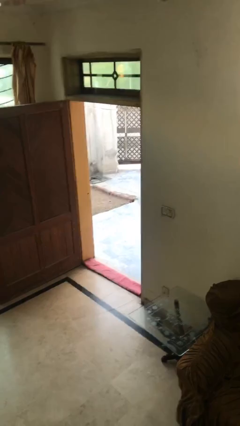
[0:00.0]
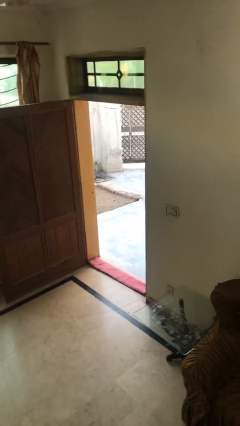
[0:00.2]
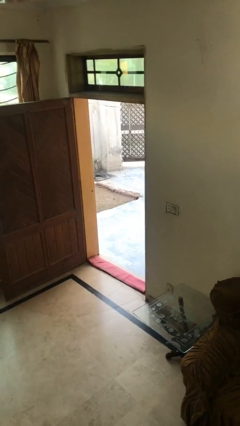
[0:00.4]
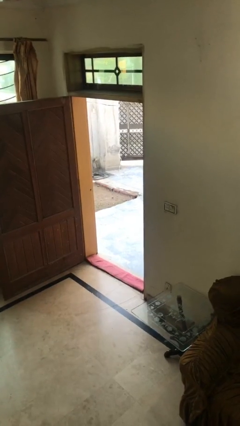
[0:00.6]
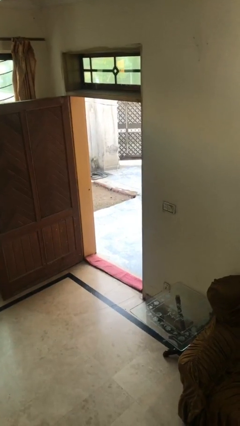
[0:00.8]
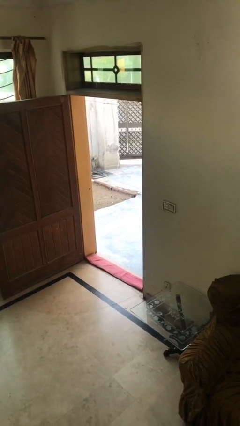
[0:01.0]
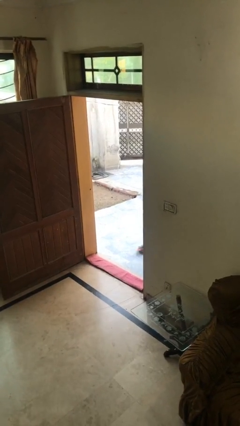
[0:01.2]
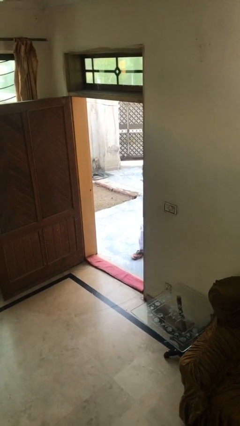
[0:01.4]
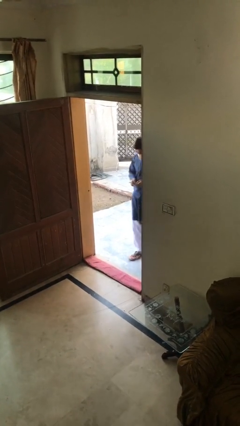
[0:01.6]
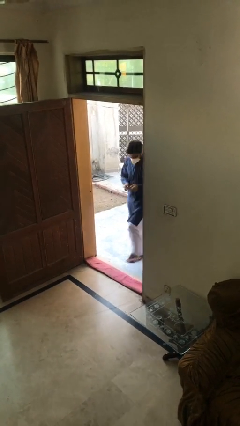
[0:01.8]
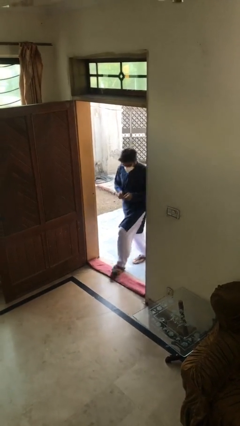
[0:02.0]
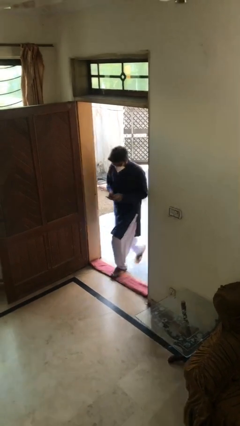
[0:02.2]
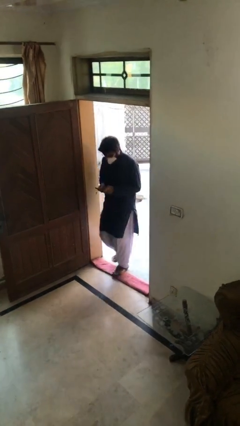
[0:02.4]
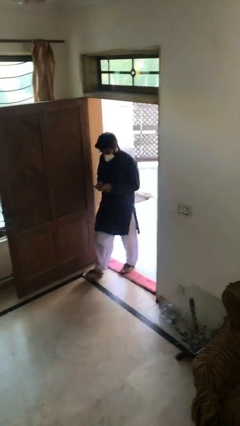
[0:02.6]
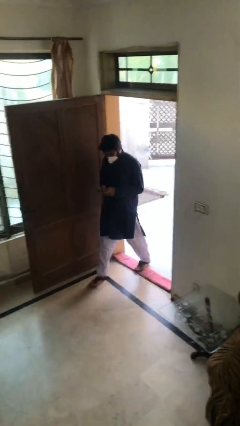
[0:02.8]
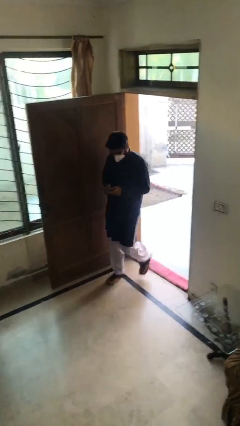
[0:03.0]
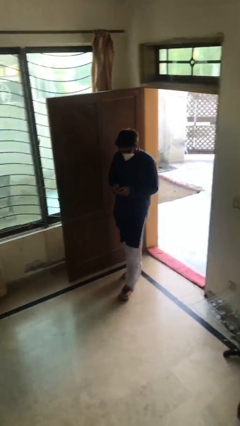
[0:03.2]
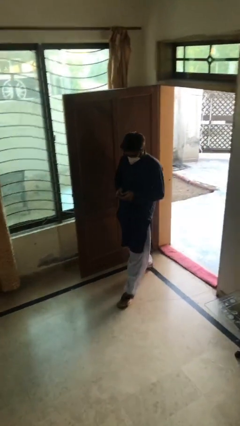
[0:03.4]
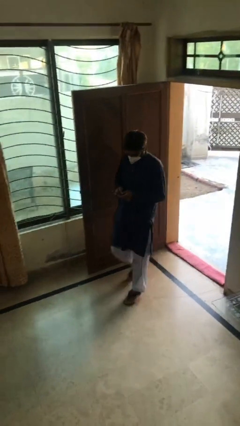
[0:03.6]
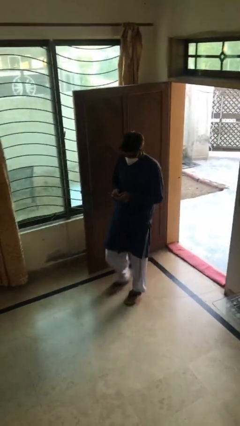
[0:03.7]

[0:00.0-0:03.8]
person enters scene through structure

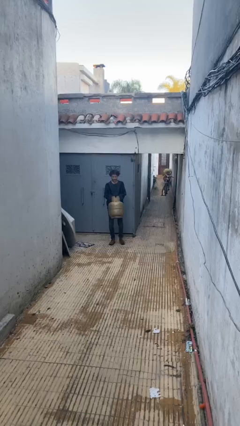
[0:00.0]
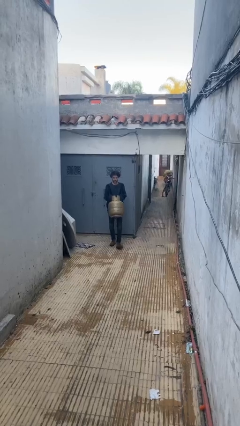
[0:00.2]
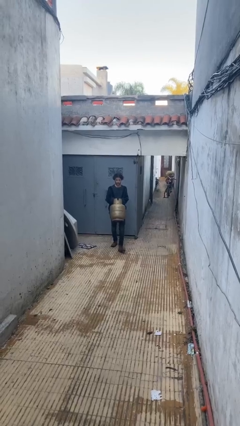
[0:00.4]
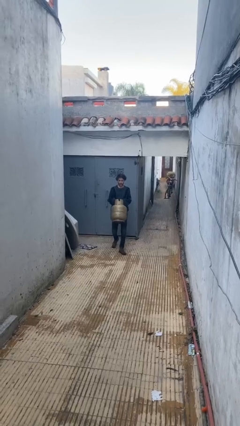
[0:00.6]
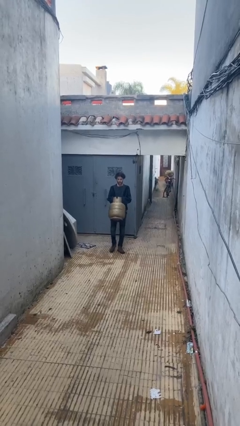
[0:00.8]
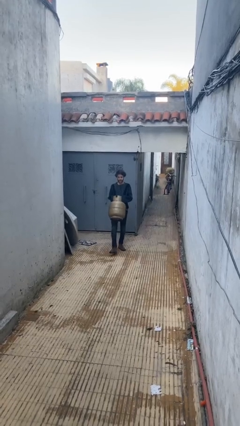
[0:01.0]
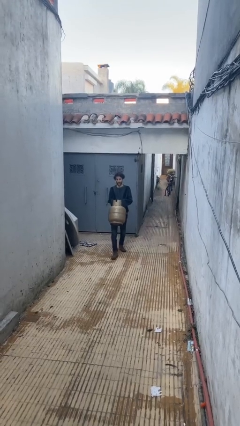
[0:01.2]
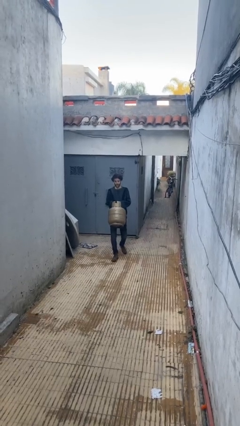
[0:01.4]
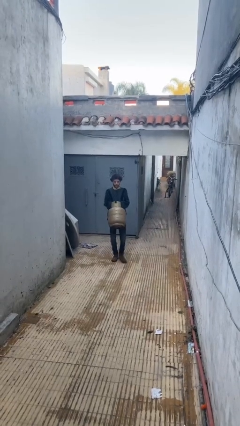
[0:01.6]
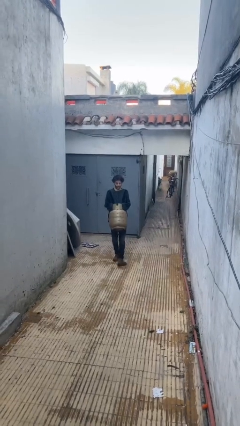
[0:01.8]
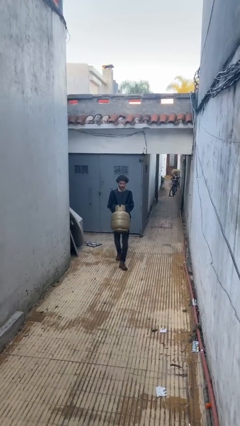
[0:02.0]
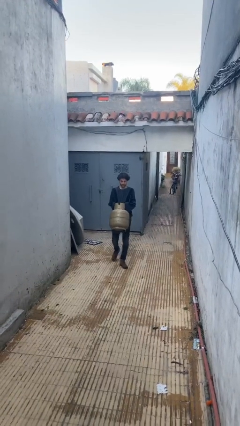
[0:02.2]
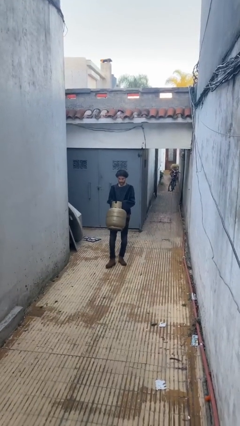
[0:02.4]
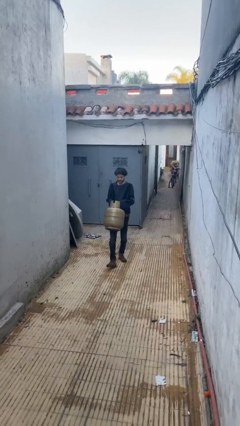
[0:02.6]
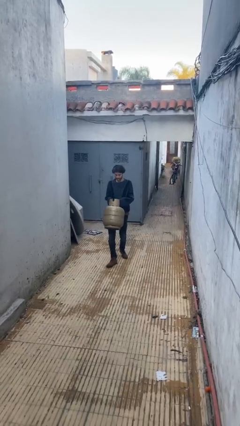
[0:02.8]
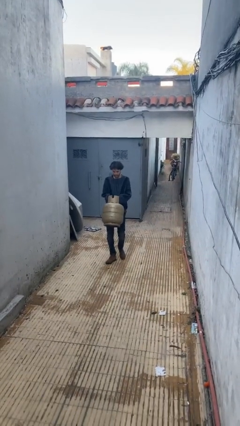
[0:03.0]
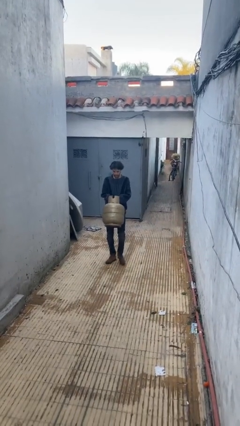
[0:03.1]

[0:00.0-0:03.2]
person carries heavy object

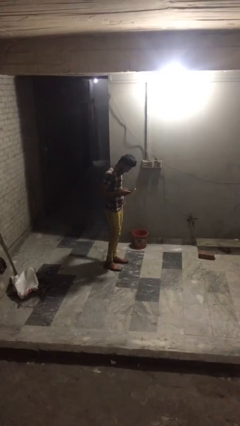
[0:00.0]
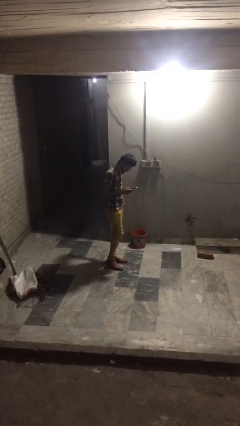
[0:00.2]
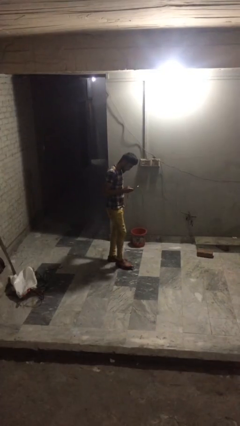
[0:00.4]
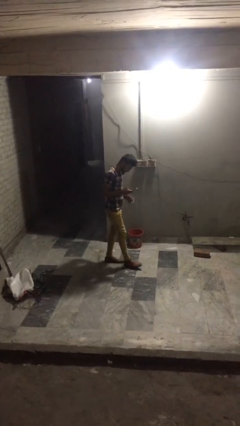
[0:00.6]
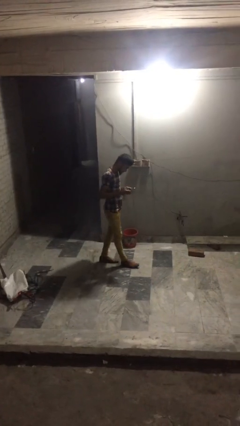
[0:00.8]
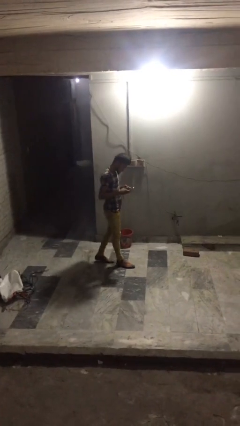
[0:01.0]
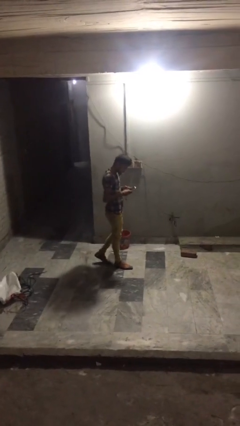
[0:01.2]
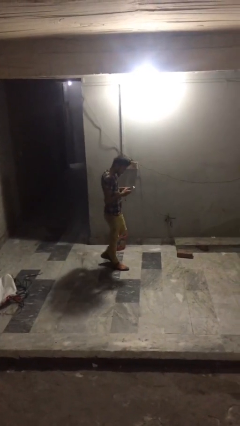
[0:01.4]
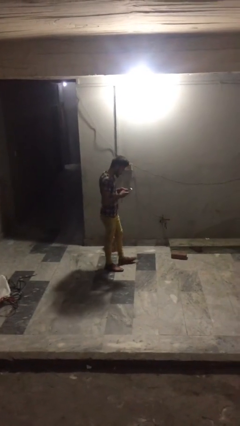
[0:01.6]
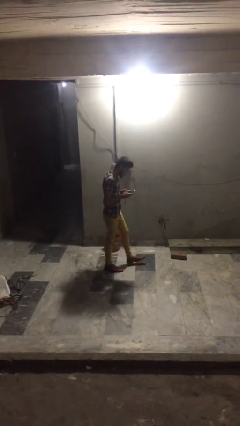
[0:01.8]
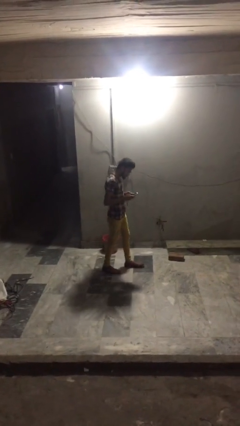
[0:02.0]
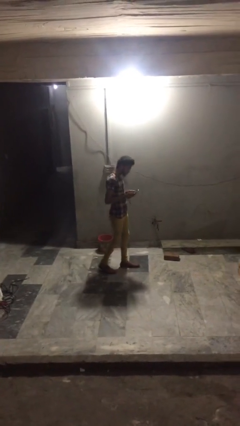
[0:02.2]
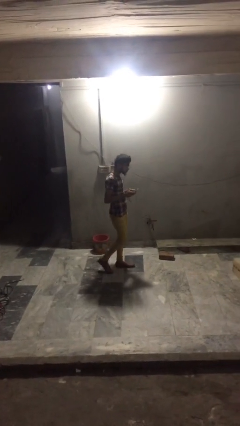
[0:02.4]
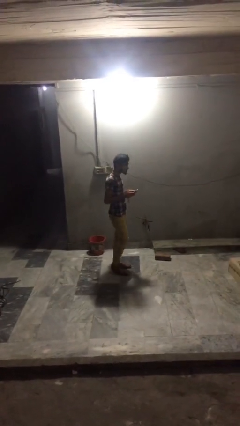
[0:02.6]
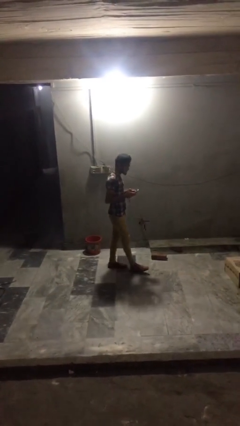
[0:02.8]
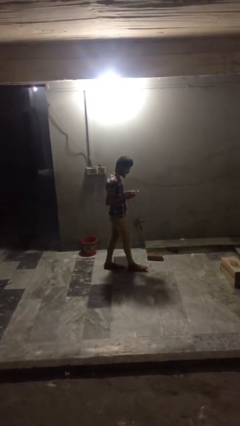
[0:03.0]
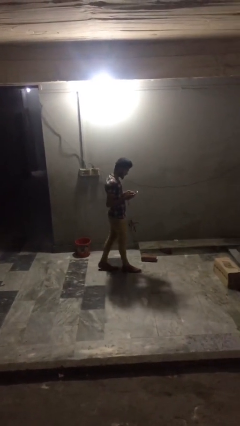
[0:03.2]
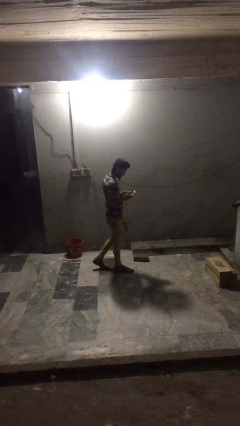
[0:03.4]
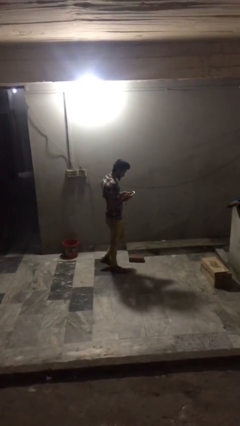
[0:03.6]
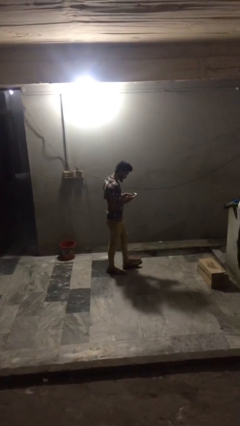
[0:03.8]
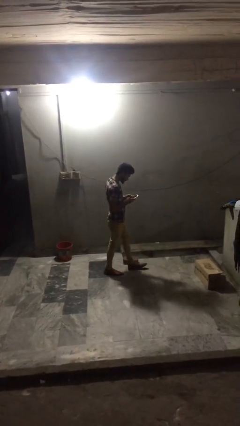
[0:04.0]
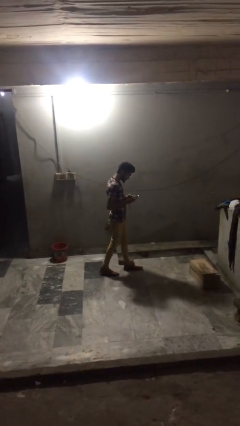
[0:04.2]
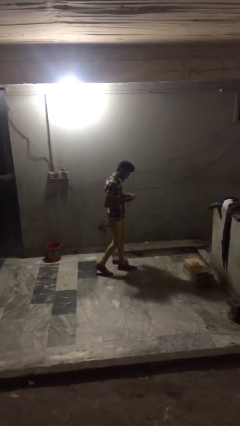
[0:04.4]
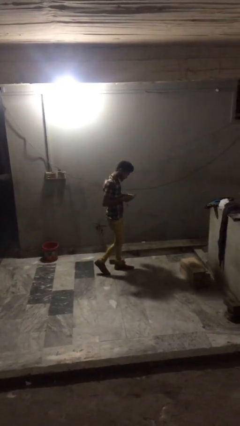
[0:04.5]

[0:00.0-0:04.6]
person texts on phone

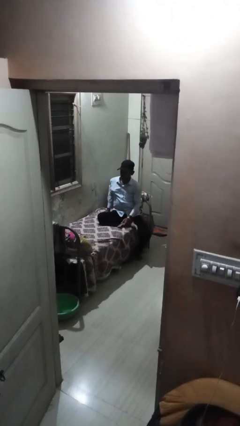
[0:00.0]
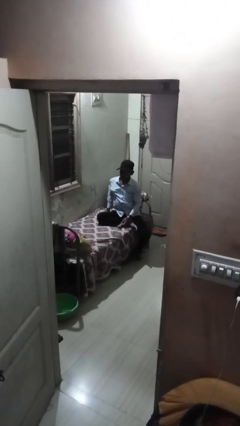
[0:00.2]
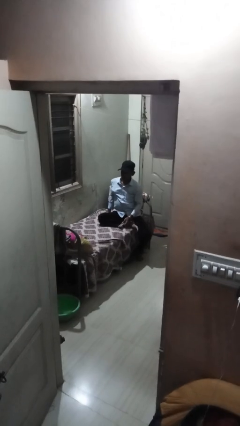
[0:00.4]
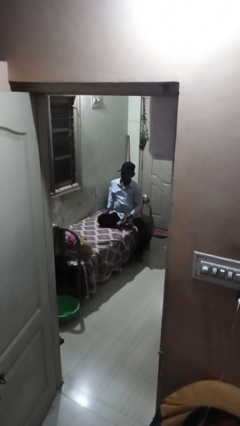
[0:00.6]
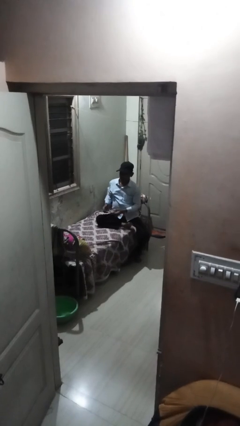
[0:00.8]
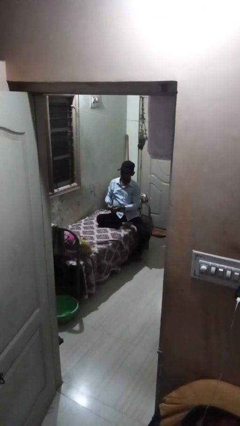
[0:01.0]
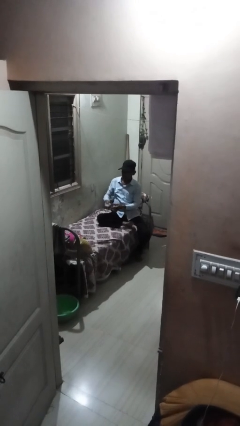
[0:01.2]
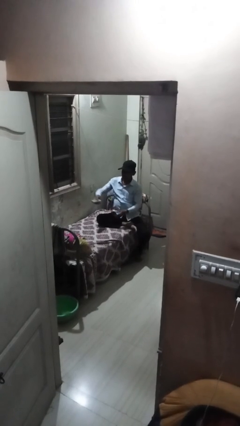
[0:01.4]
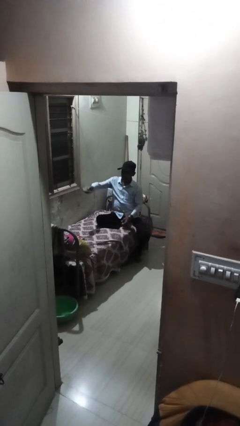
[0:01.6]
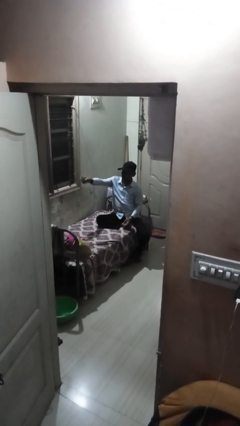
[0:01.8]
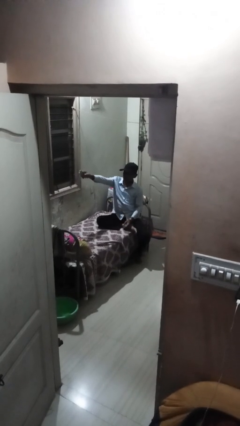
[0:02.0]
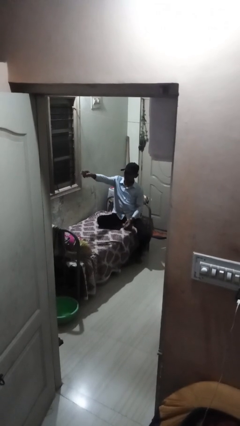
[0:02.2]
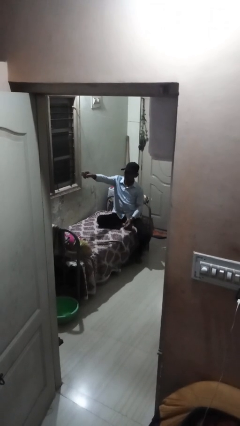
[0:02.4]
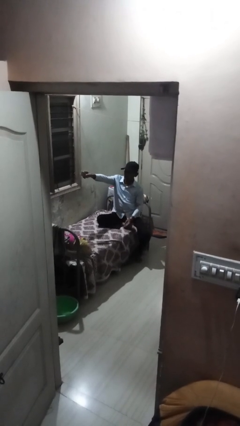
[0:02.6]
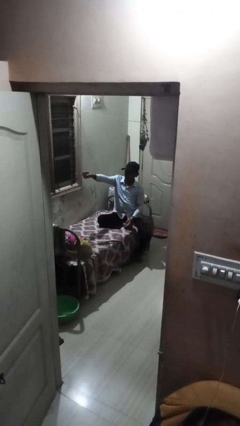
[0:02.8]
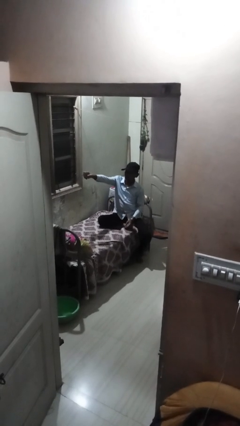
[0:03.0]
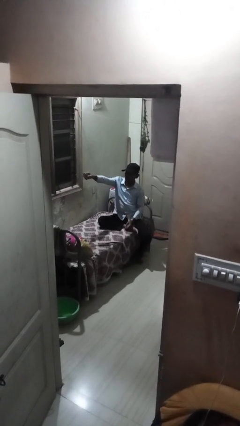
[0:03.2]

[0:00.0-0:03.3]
person uses television remote

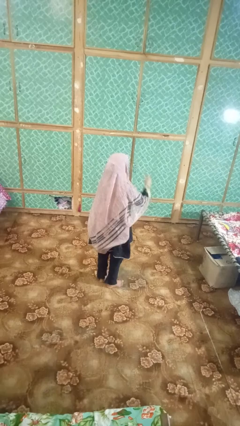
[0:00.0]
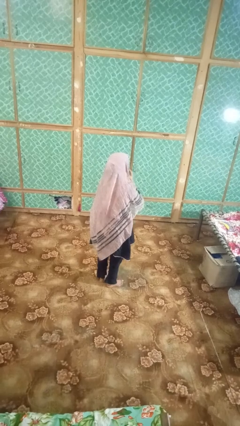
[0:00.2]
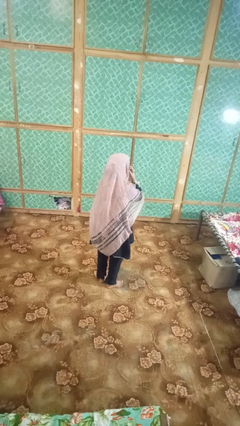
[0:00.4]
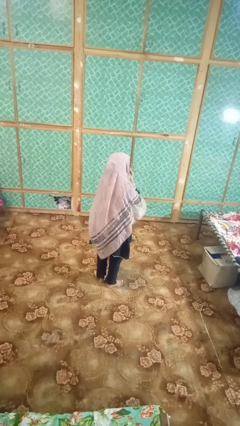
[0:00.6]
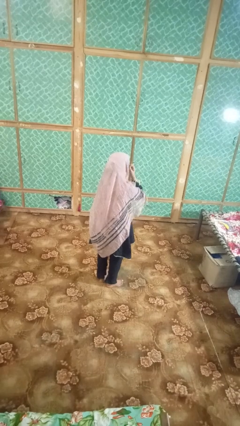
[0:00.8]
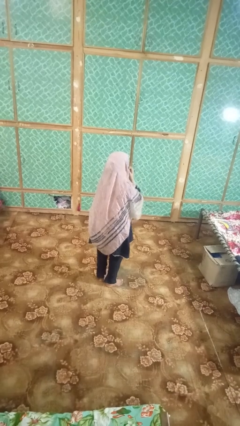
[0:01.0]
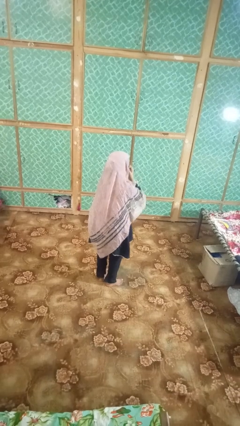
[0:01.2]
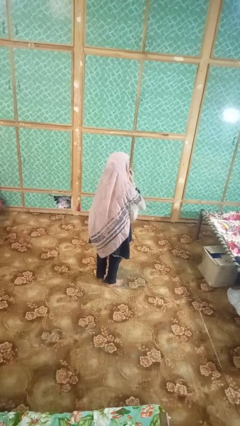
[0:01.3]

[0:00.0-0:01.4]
person strokes chin

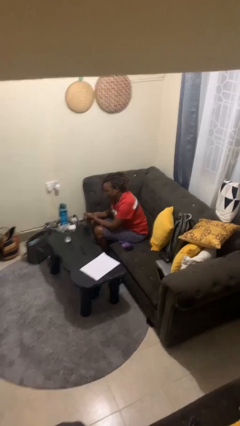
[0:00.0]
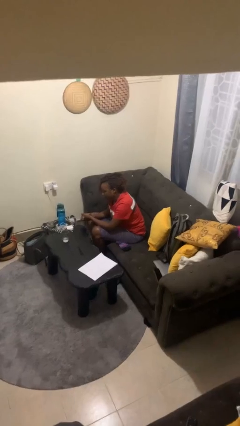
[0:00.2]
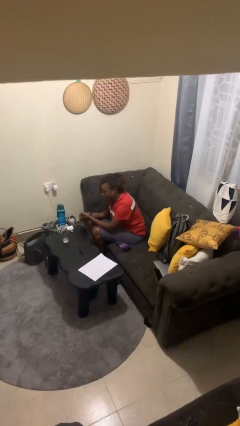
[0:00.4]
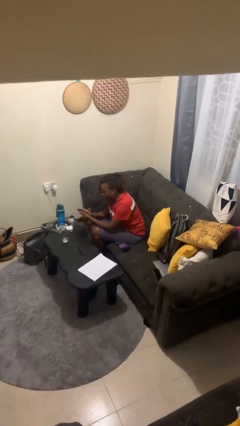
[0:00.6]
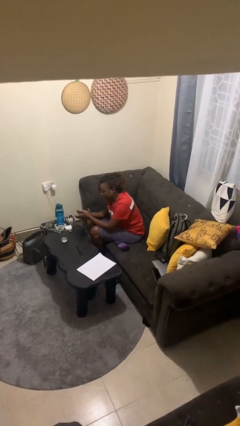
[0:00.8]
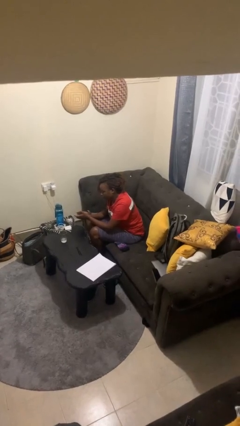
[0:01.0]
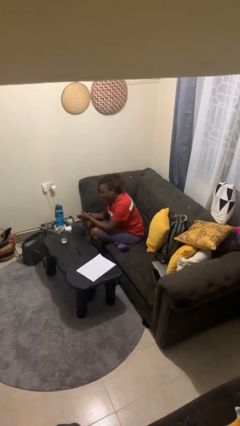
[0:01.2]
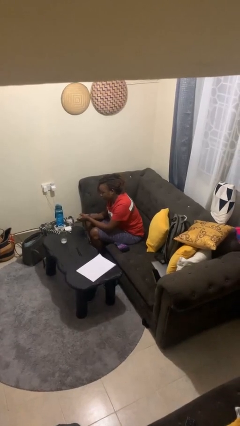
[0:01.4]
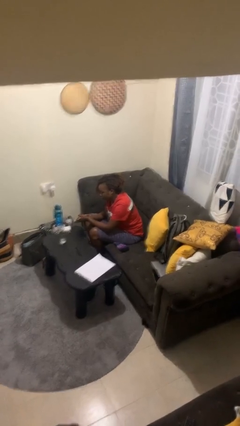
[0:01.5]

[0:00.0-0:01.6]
person claps hands
